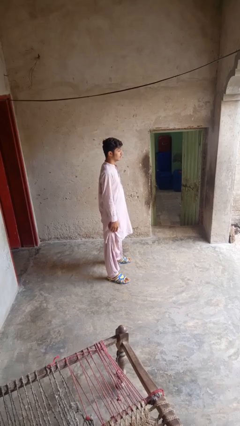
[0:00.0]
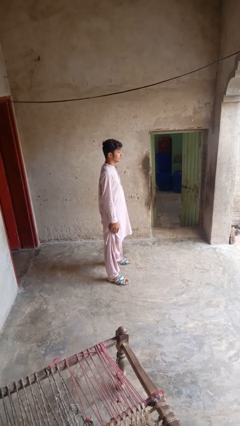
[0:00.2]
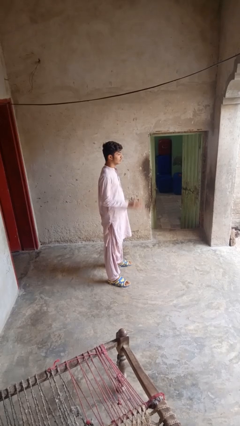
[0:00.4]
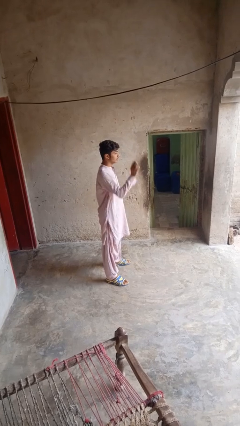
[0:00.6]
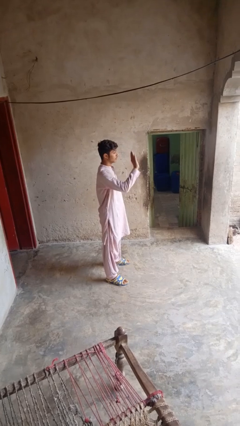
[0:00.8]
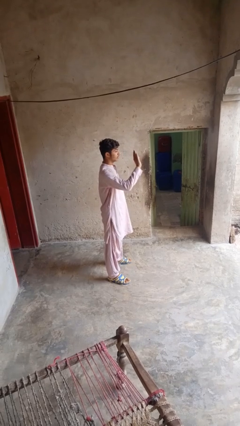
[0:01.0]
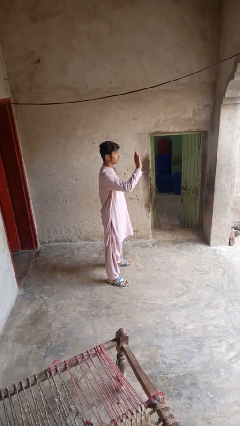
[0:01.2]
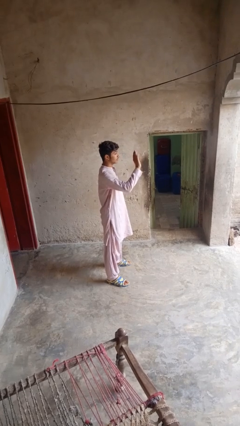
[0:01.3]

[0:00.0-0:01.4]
person waves at person

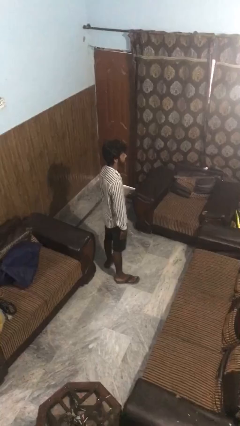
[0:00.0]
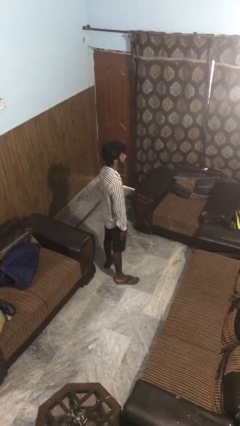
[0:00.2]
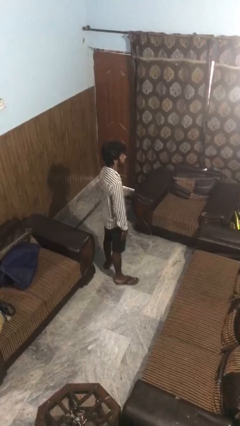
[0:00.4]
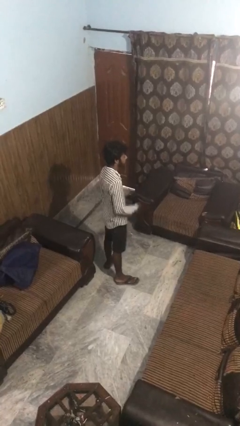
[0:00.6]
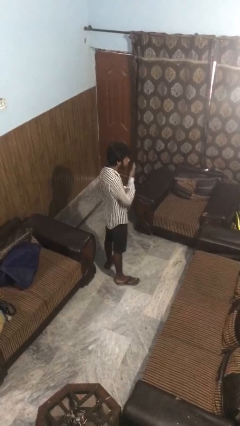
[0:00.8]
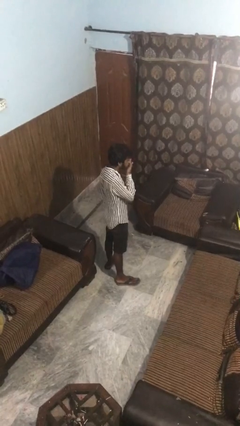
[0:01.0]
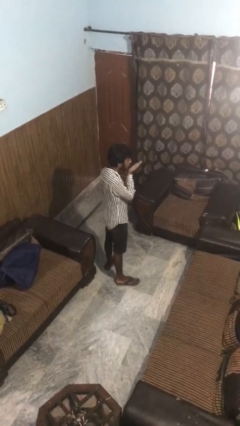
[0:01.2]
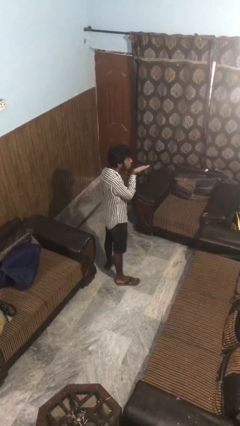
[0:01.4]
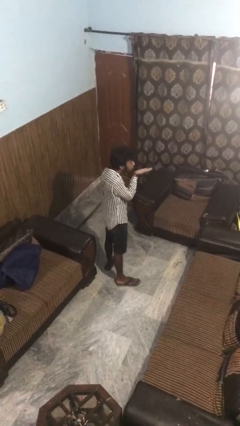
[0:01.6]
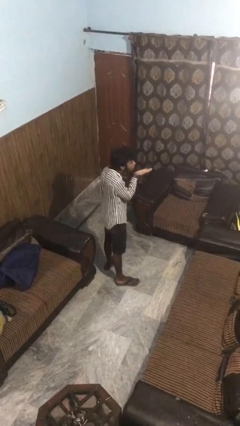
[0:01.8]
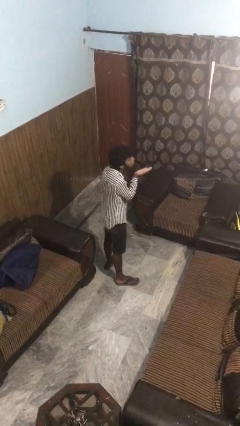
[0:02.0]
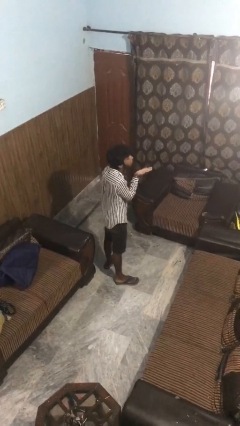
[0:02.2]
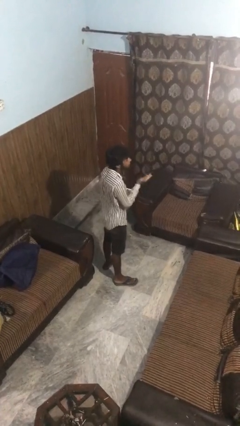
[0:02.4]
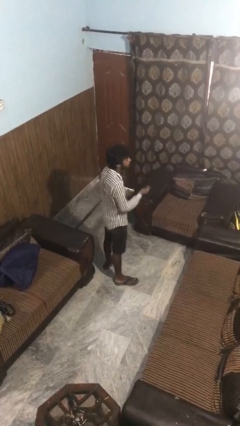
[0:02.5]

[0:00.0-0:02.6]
person gestures blow kiss

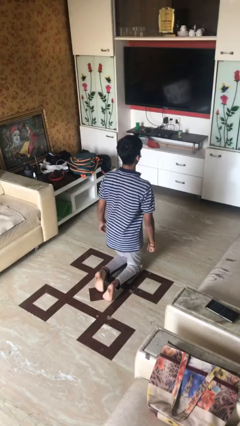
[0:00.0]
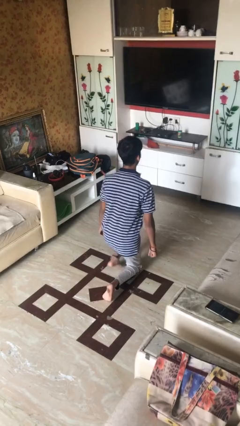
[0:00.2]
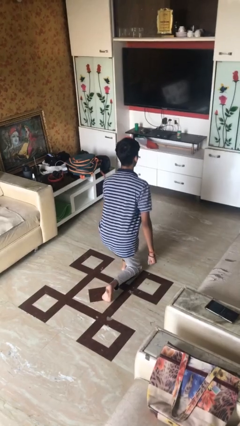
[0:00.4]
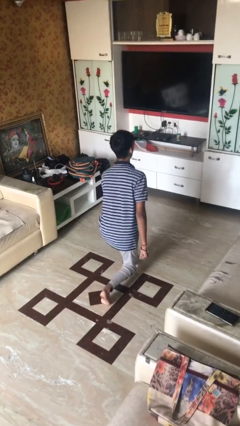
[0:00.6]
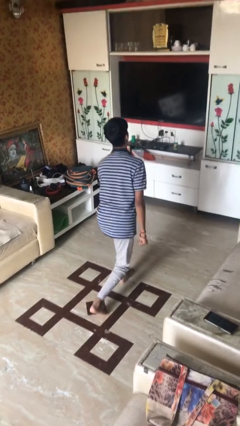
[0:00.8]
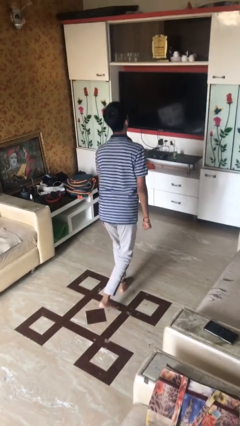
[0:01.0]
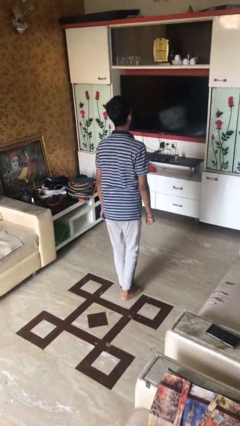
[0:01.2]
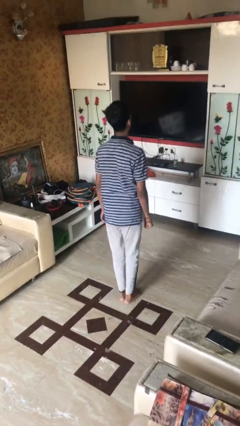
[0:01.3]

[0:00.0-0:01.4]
person stands up from floor

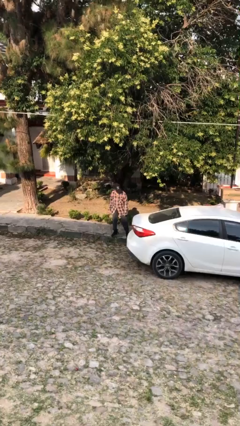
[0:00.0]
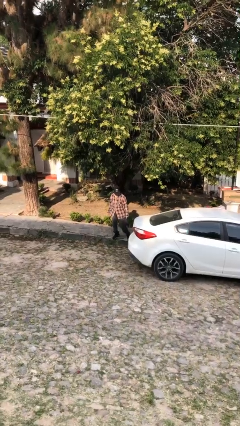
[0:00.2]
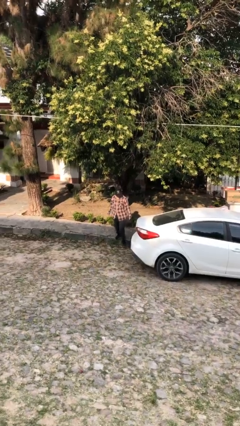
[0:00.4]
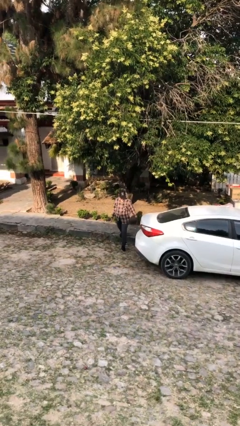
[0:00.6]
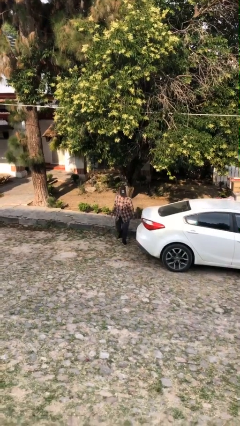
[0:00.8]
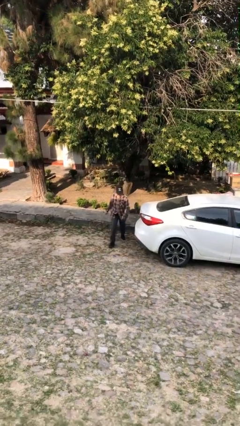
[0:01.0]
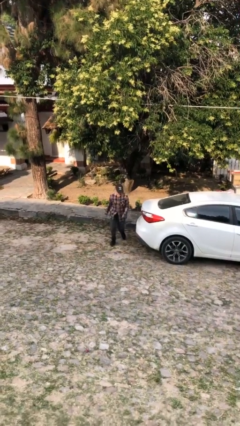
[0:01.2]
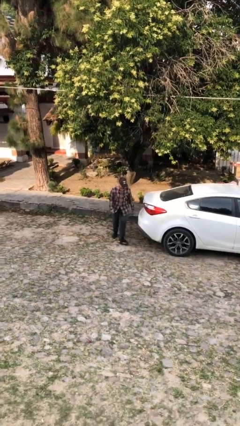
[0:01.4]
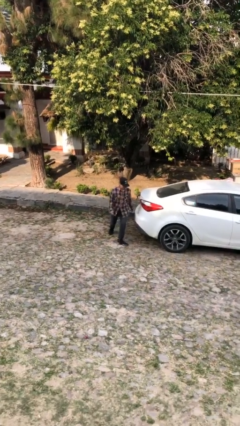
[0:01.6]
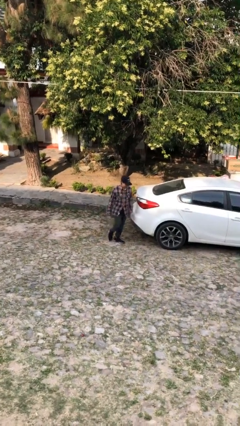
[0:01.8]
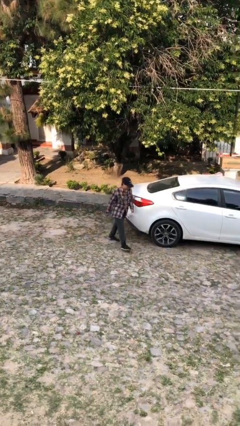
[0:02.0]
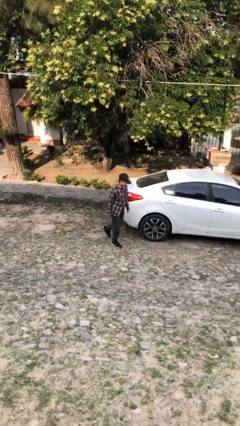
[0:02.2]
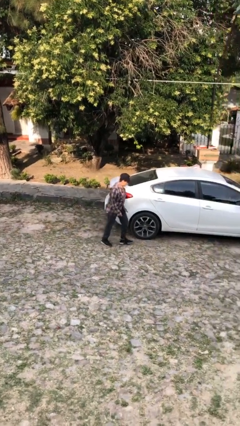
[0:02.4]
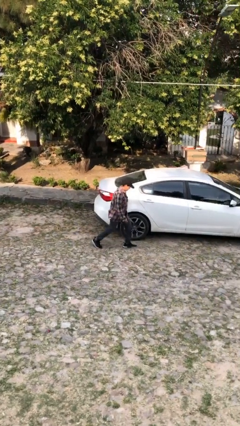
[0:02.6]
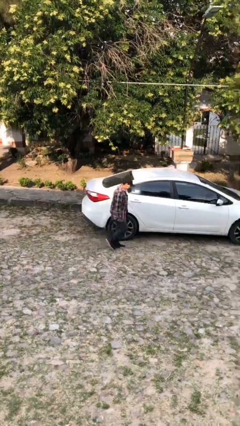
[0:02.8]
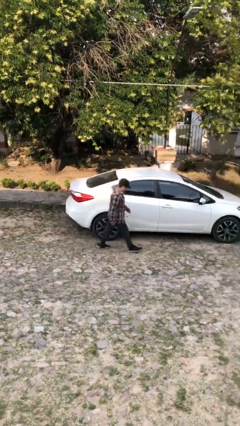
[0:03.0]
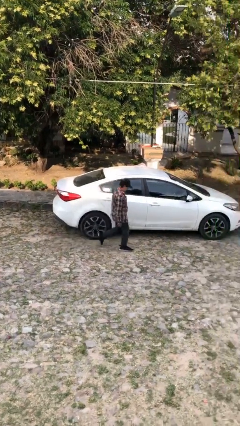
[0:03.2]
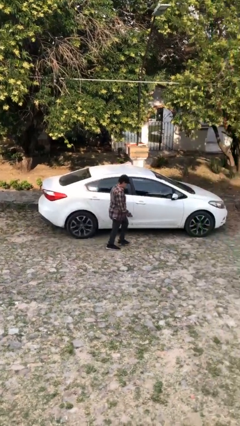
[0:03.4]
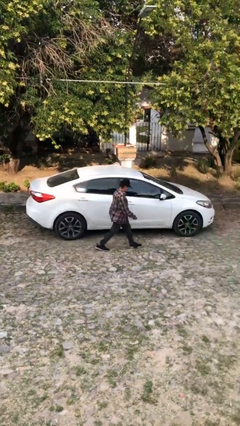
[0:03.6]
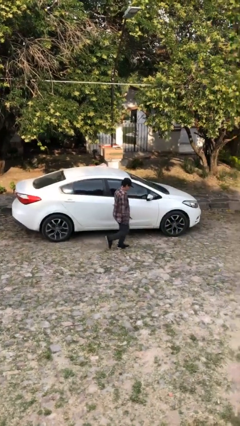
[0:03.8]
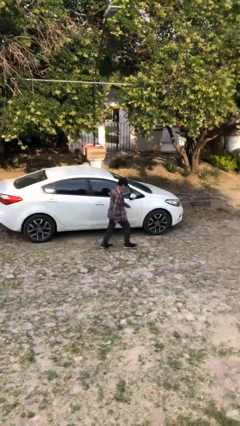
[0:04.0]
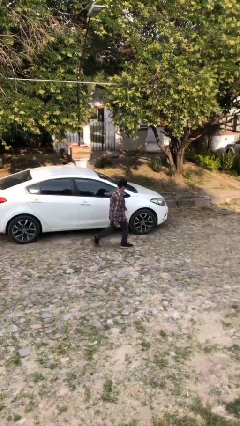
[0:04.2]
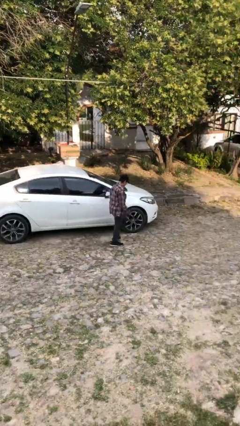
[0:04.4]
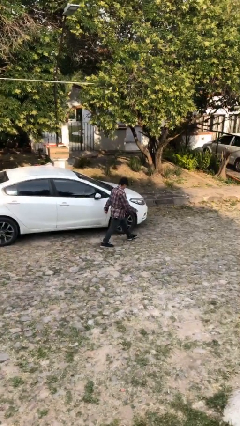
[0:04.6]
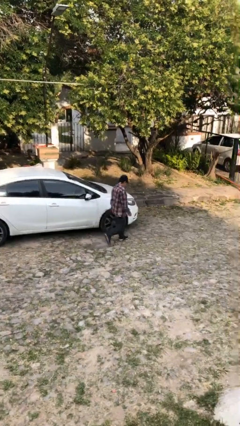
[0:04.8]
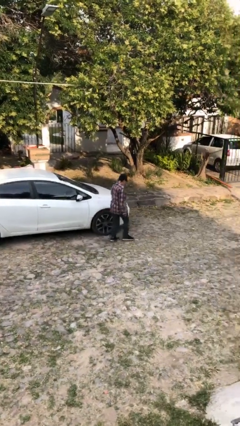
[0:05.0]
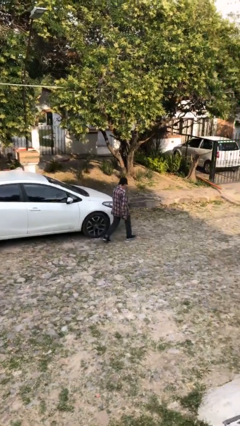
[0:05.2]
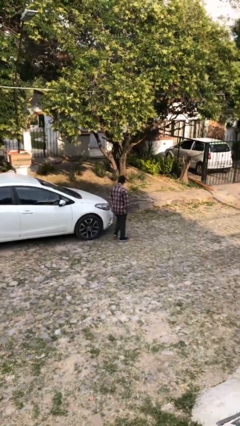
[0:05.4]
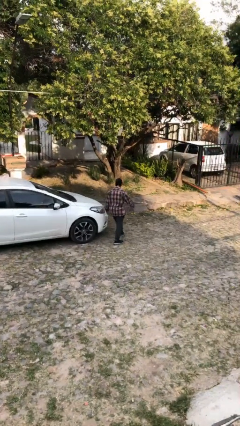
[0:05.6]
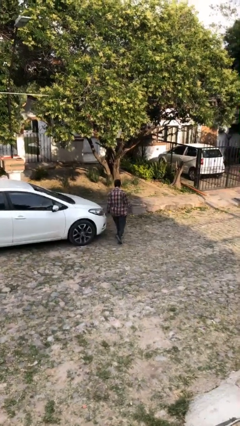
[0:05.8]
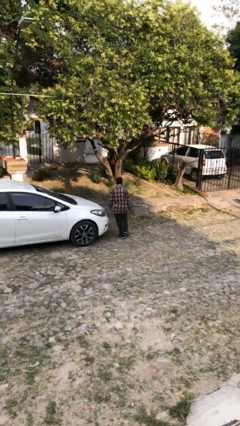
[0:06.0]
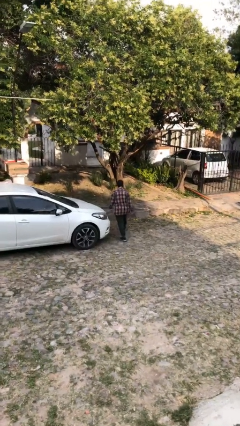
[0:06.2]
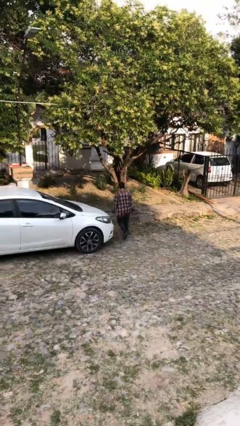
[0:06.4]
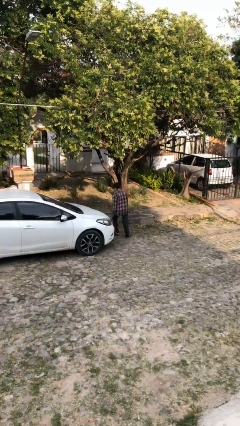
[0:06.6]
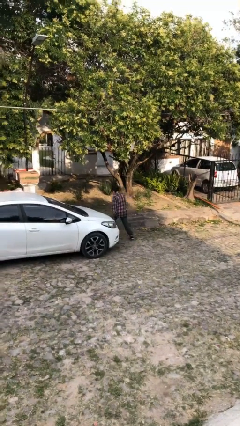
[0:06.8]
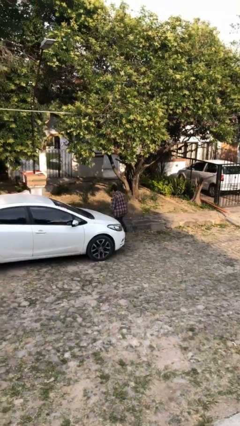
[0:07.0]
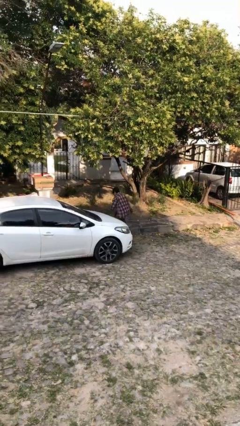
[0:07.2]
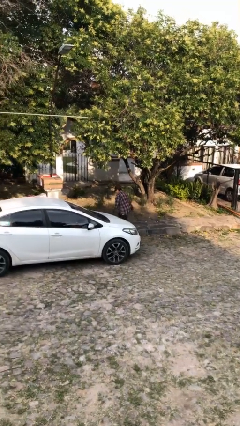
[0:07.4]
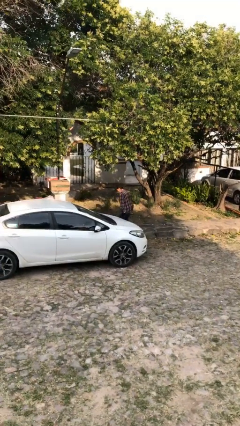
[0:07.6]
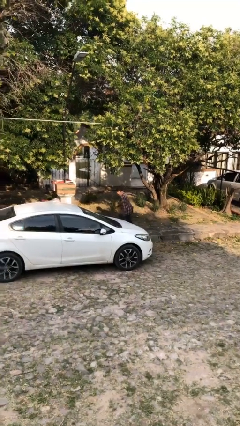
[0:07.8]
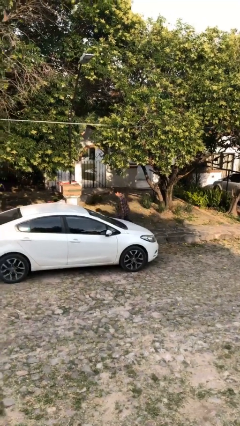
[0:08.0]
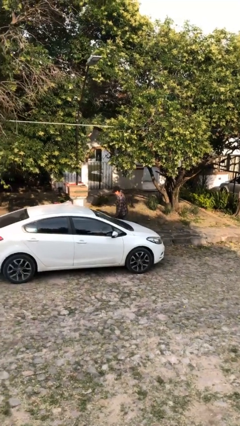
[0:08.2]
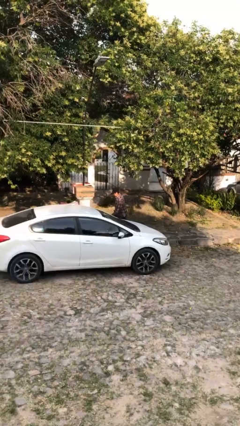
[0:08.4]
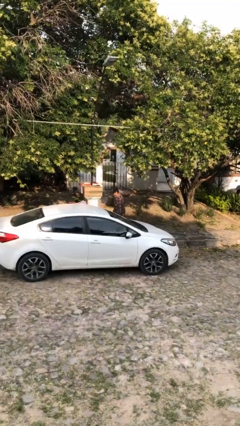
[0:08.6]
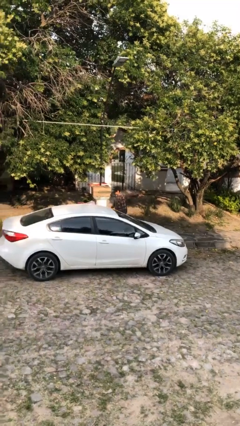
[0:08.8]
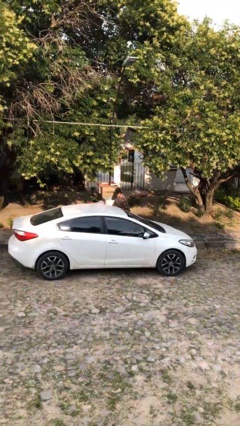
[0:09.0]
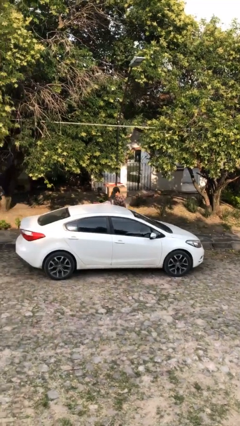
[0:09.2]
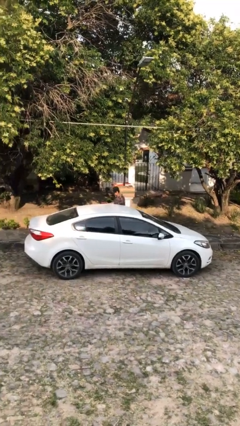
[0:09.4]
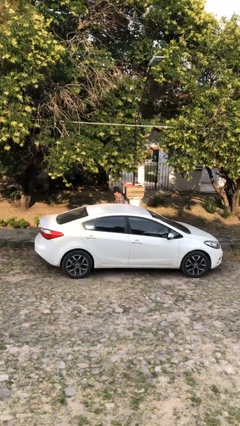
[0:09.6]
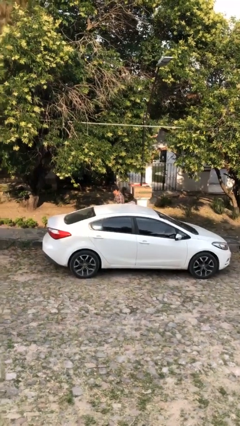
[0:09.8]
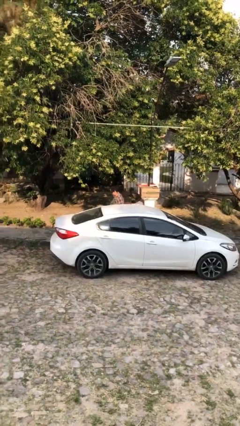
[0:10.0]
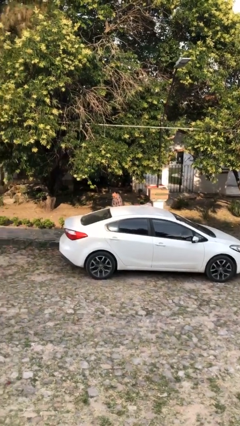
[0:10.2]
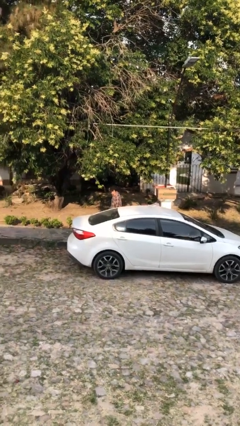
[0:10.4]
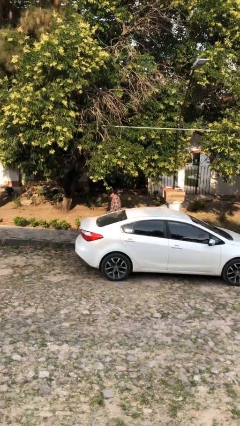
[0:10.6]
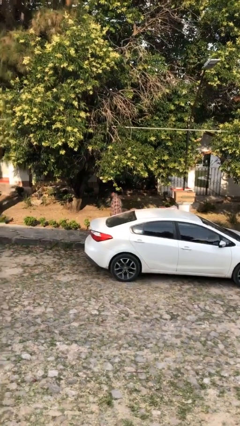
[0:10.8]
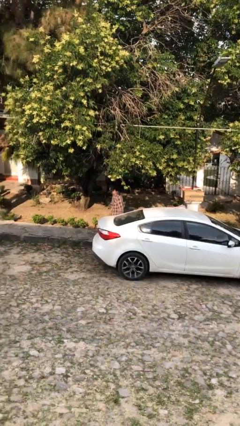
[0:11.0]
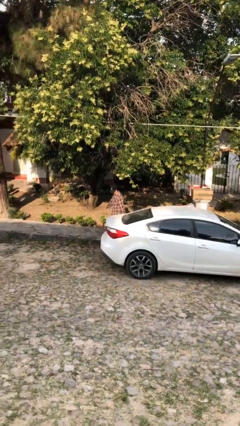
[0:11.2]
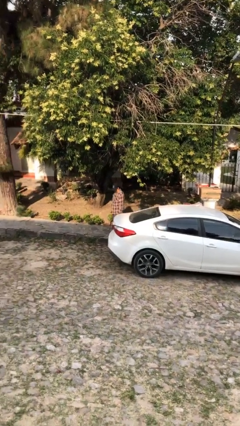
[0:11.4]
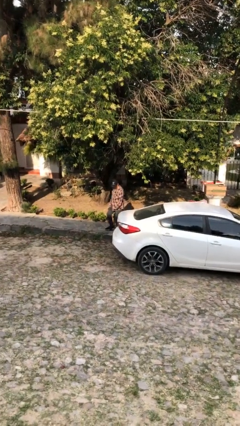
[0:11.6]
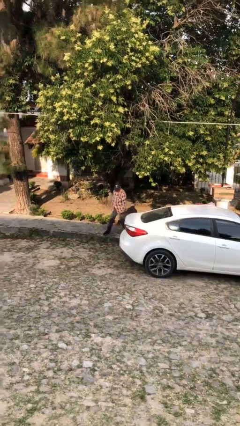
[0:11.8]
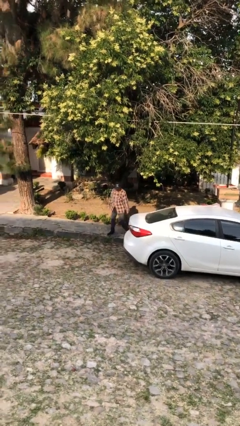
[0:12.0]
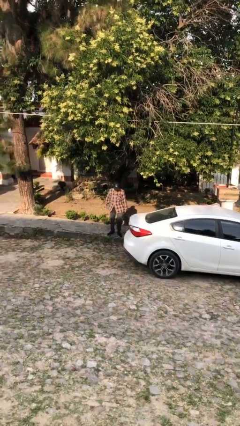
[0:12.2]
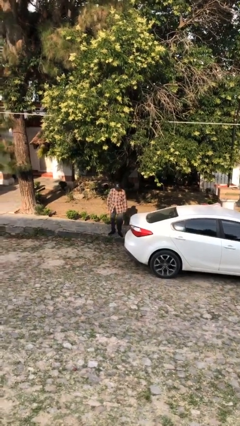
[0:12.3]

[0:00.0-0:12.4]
person walks around car
